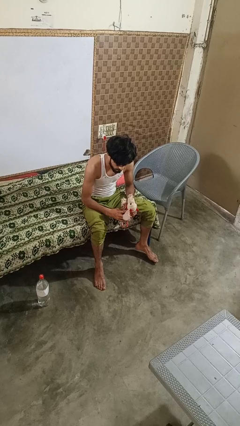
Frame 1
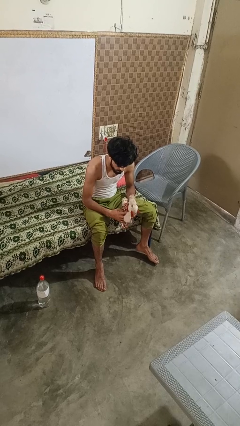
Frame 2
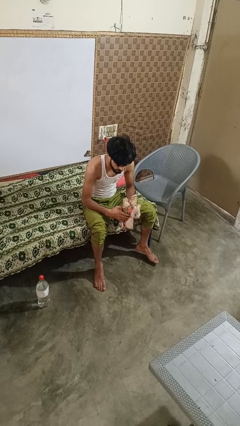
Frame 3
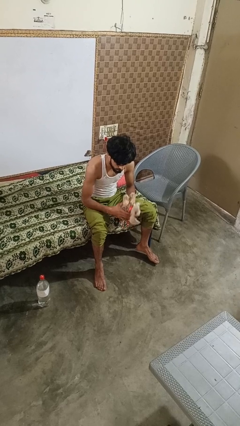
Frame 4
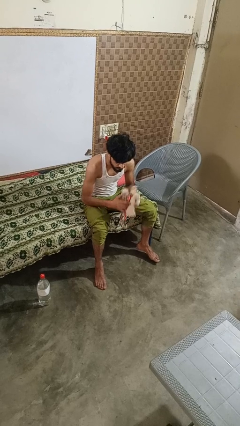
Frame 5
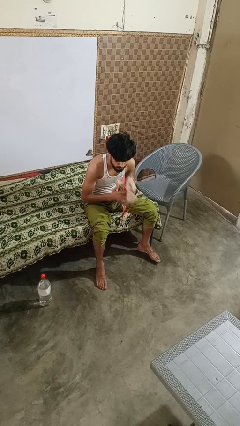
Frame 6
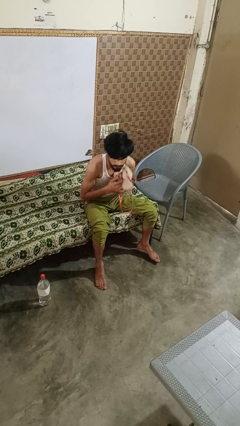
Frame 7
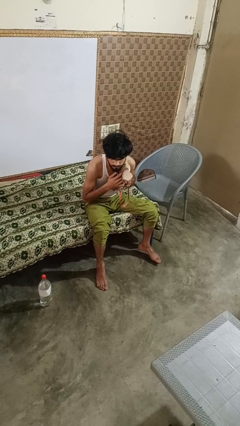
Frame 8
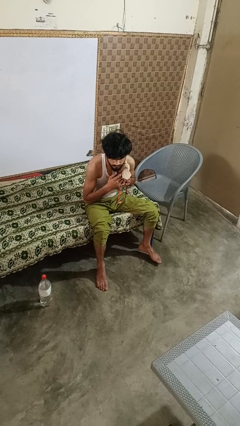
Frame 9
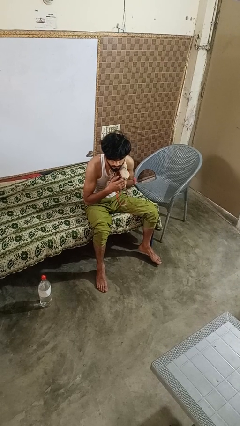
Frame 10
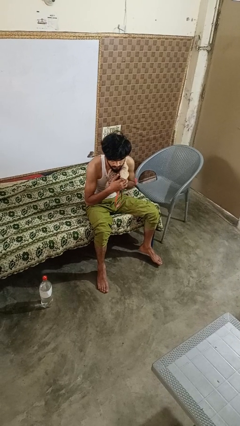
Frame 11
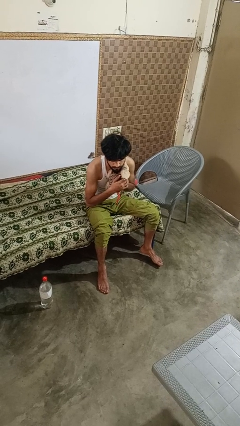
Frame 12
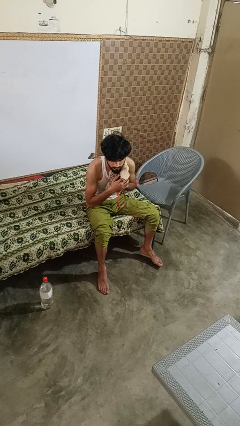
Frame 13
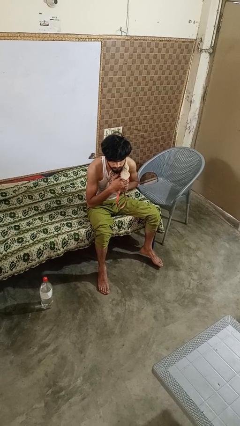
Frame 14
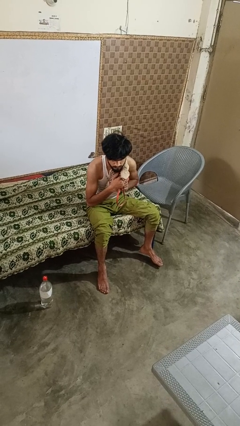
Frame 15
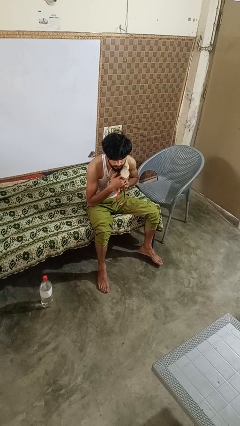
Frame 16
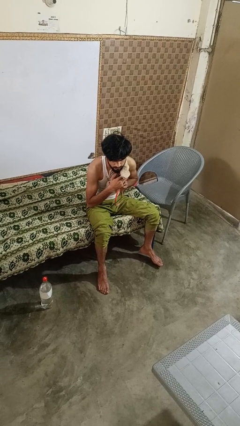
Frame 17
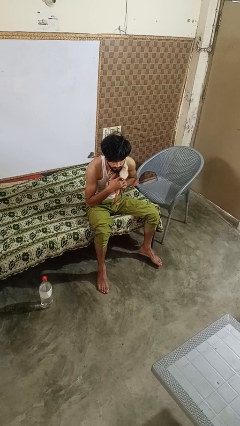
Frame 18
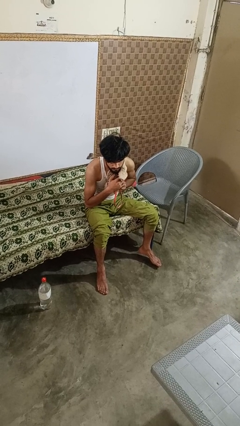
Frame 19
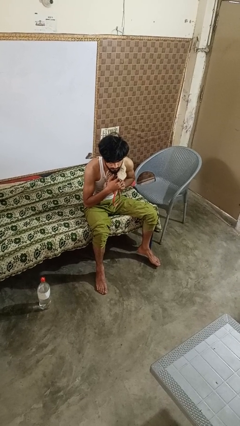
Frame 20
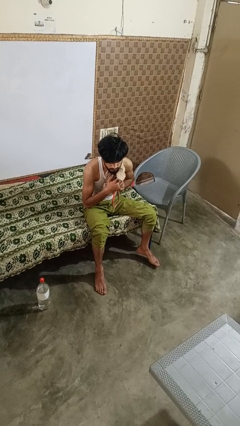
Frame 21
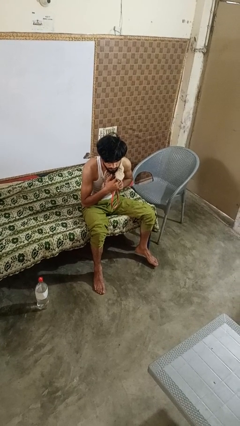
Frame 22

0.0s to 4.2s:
person hugs stuffed animal

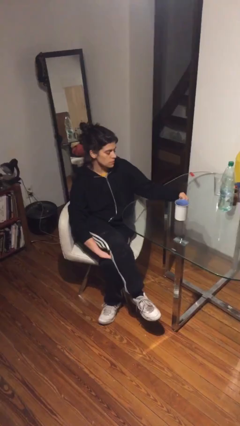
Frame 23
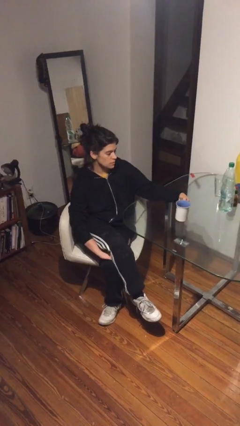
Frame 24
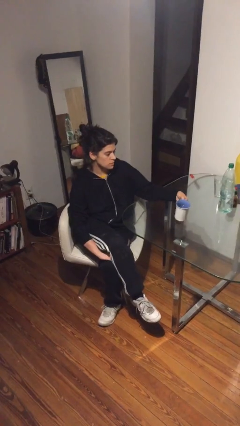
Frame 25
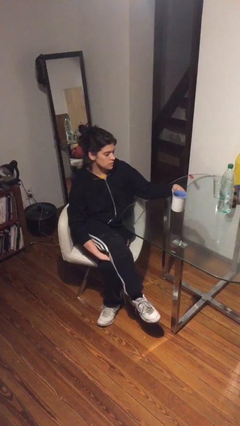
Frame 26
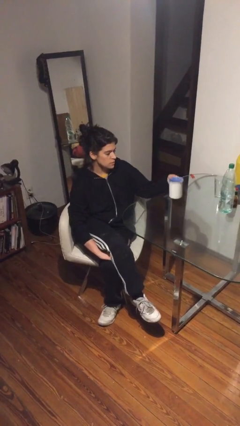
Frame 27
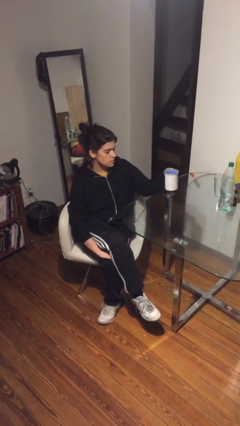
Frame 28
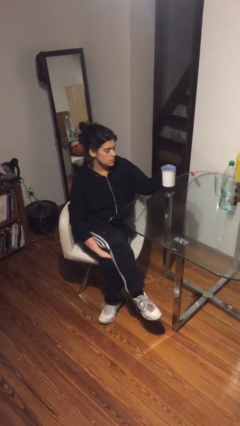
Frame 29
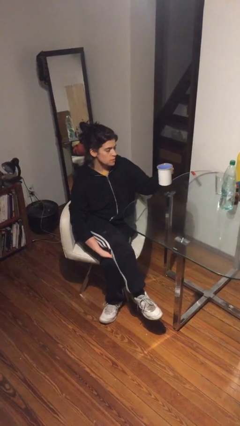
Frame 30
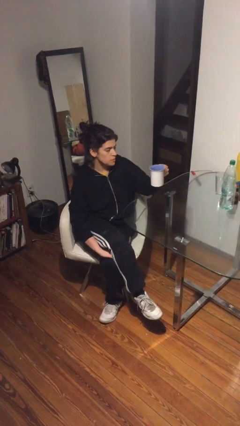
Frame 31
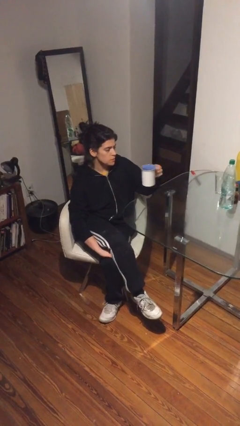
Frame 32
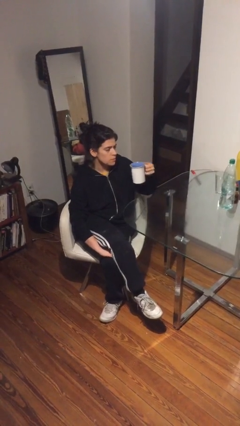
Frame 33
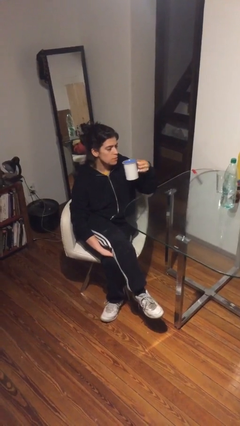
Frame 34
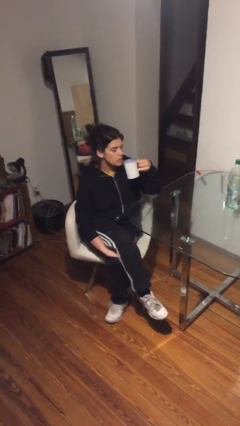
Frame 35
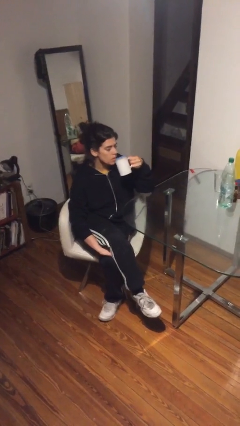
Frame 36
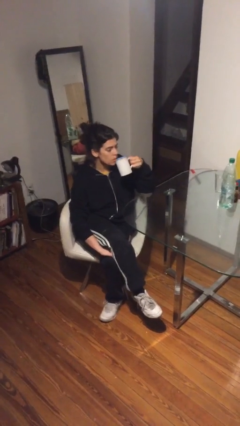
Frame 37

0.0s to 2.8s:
person picks up object from table

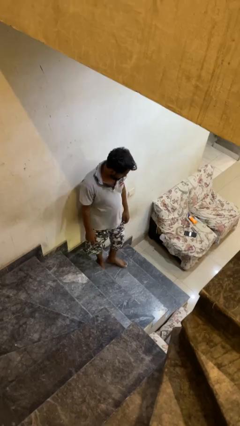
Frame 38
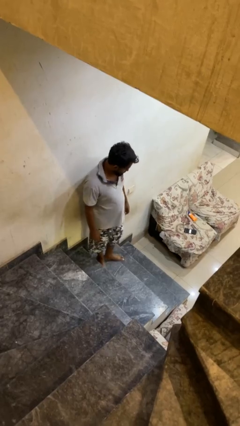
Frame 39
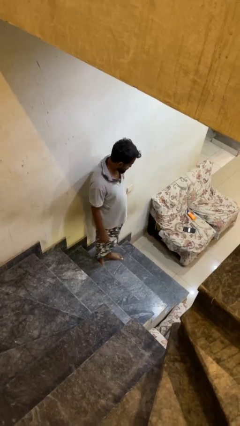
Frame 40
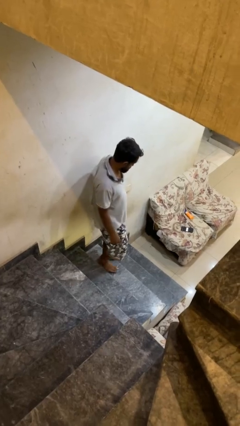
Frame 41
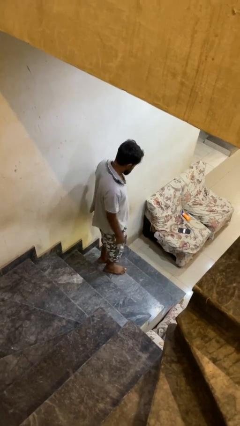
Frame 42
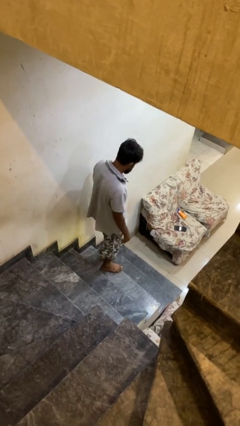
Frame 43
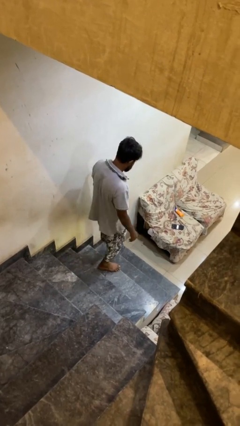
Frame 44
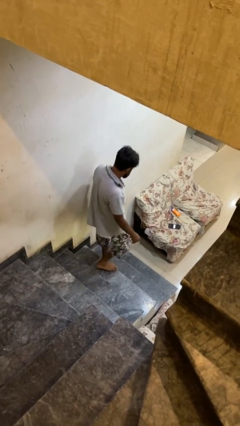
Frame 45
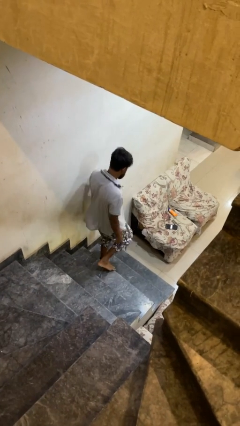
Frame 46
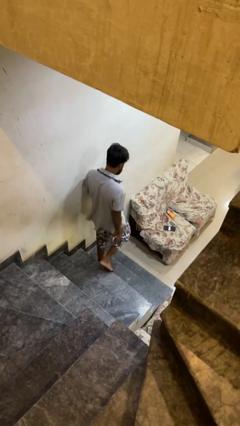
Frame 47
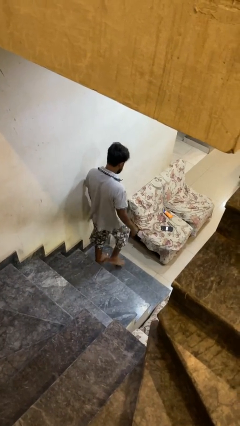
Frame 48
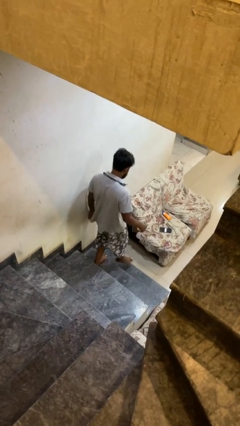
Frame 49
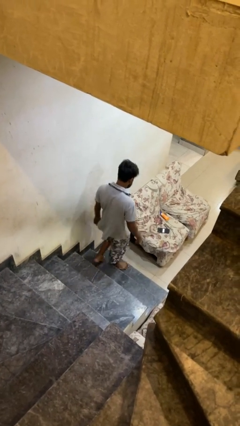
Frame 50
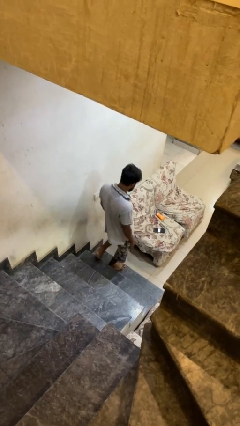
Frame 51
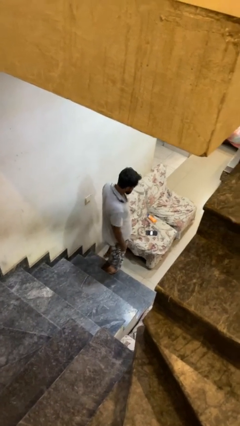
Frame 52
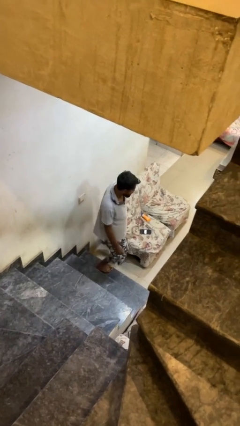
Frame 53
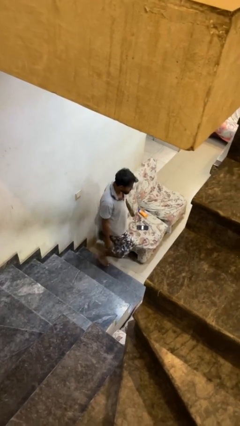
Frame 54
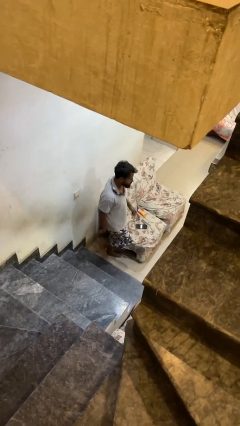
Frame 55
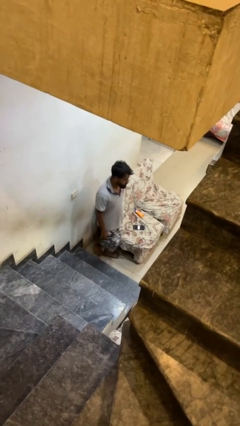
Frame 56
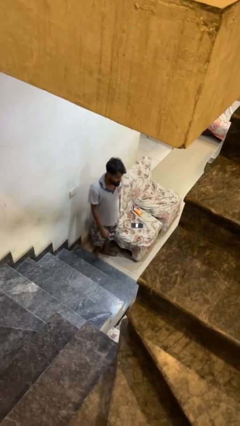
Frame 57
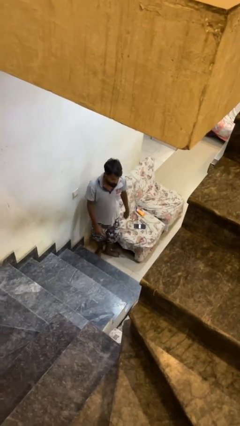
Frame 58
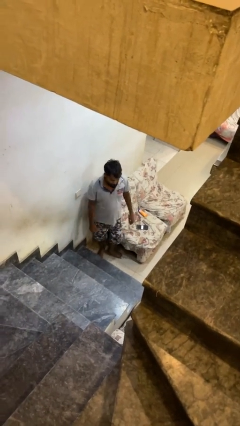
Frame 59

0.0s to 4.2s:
person climbs down stairs

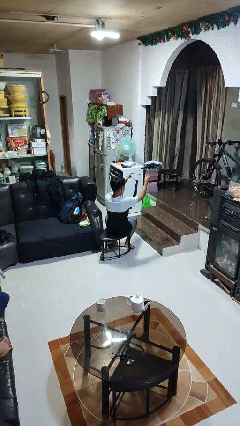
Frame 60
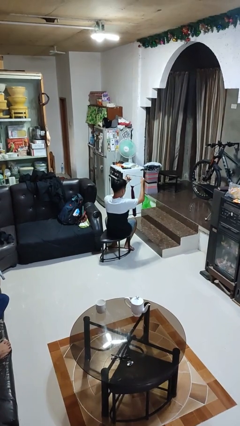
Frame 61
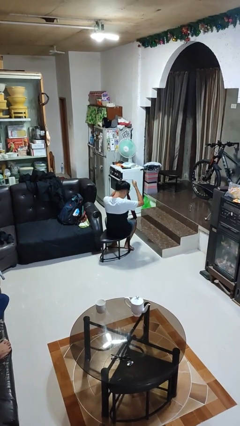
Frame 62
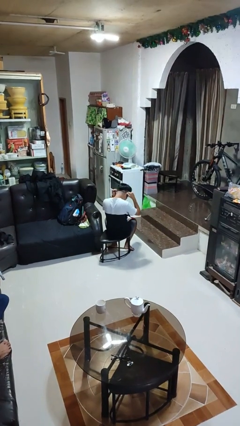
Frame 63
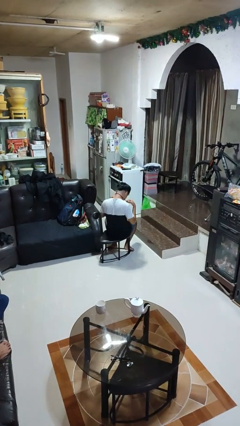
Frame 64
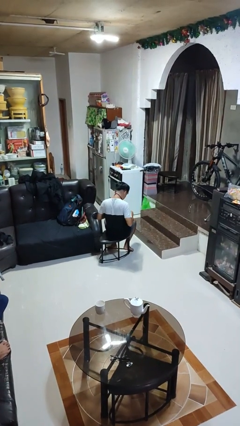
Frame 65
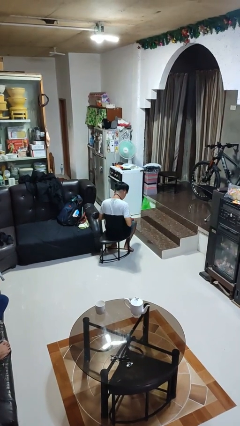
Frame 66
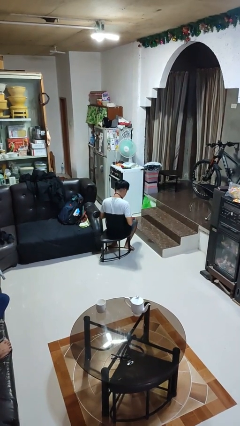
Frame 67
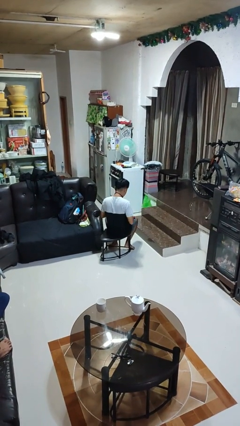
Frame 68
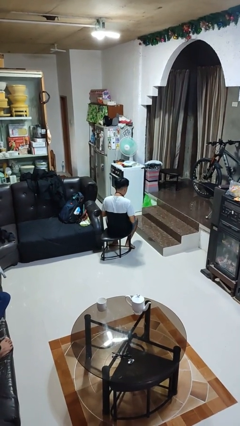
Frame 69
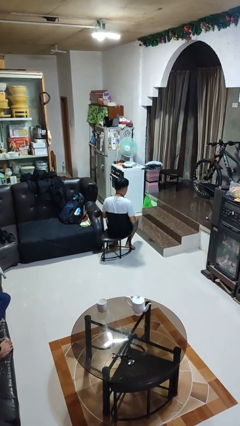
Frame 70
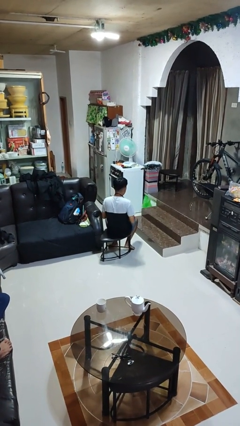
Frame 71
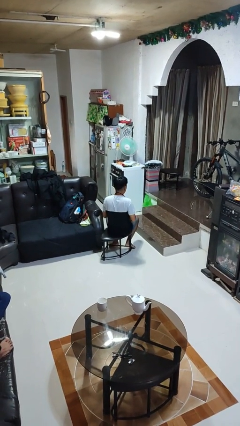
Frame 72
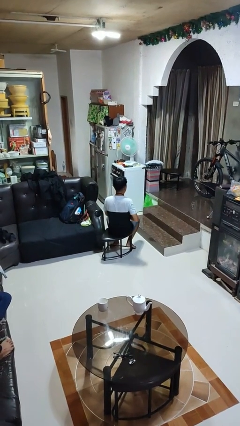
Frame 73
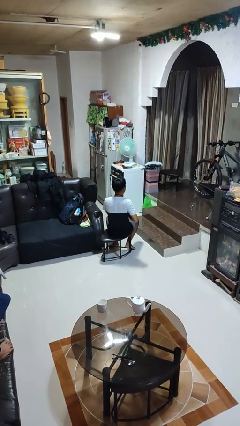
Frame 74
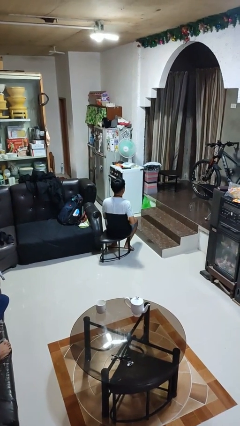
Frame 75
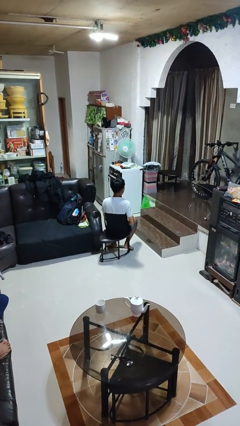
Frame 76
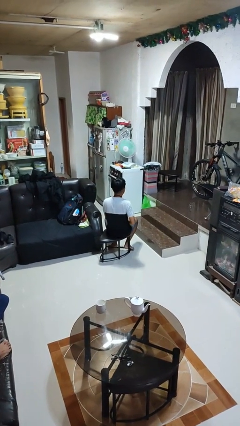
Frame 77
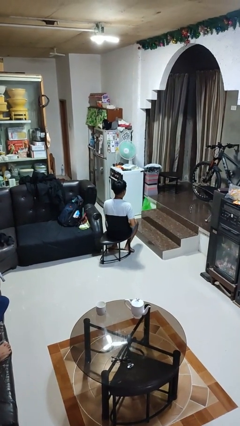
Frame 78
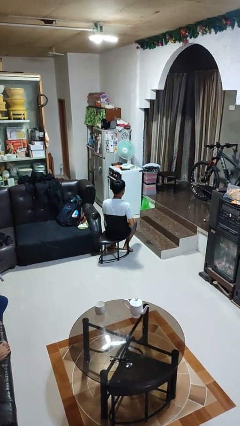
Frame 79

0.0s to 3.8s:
person puts on necktie

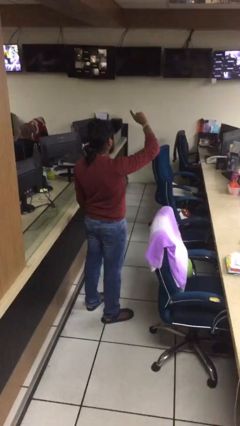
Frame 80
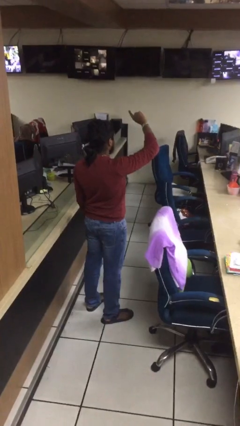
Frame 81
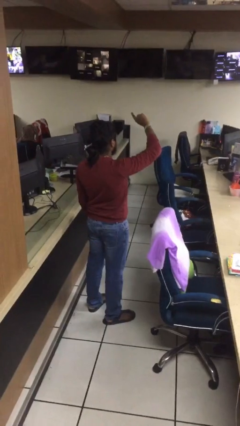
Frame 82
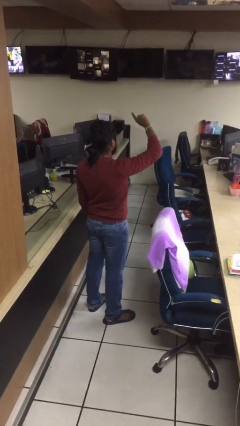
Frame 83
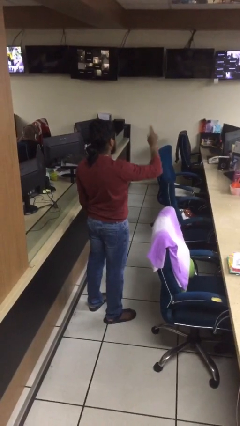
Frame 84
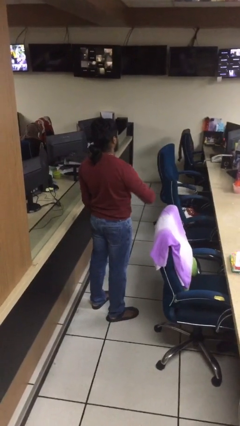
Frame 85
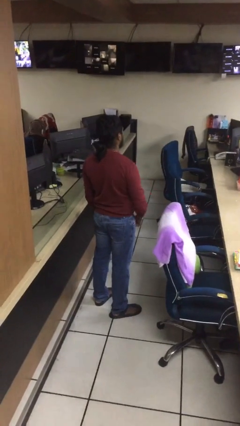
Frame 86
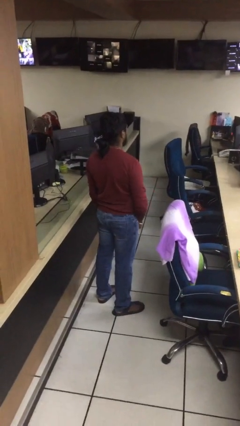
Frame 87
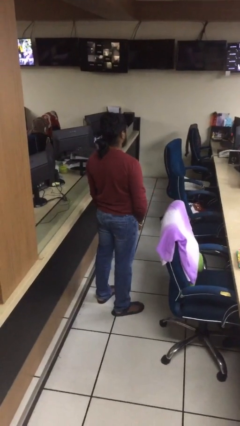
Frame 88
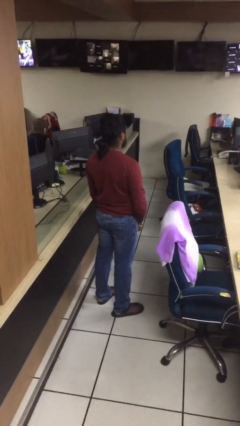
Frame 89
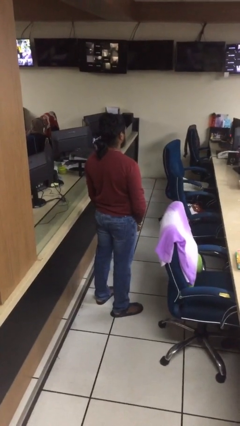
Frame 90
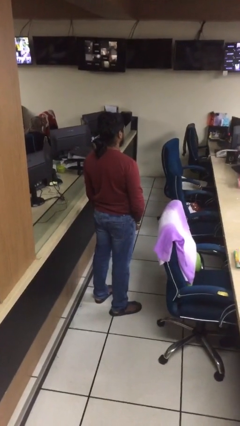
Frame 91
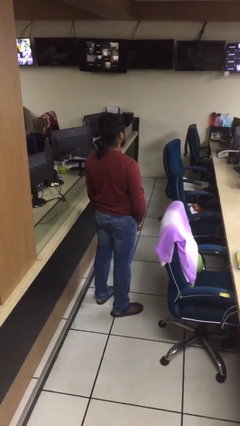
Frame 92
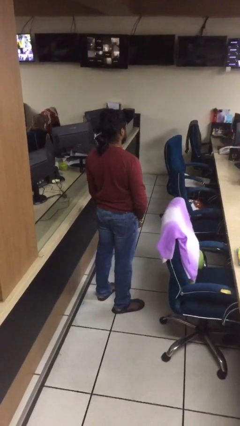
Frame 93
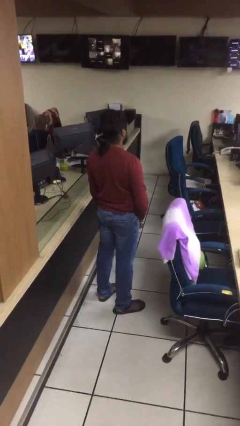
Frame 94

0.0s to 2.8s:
person gestures swipe down
